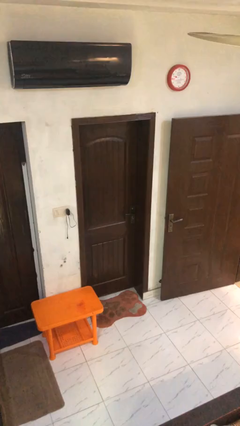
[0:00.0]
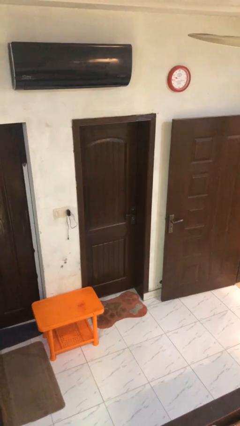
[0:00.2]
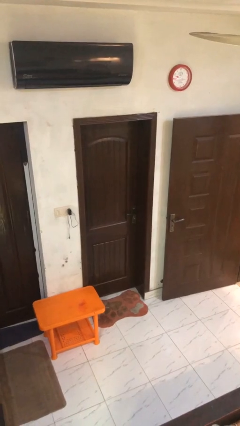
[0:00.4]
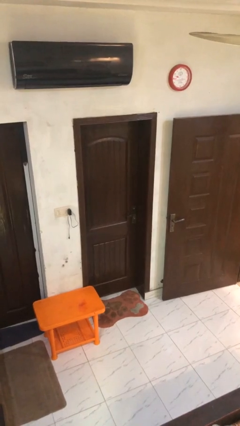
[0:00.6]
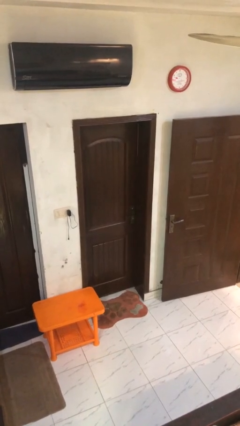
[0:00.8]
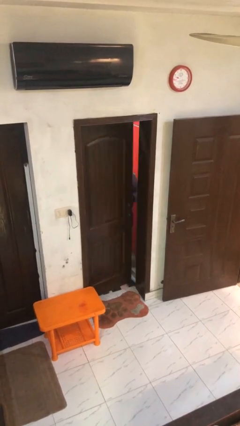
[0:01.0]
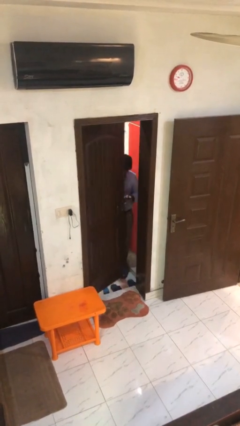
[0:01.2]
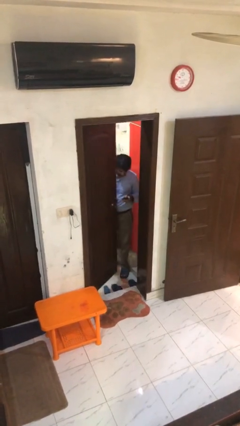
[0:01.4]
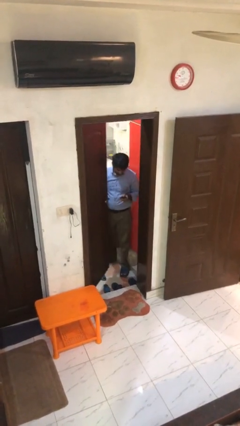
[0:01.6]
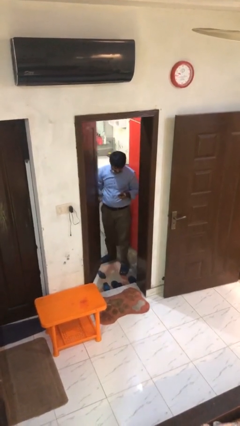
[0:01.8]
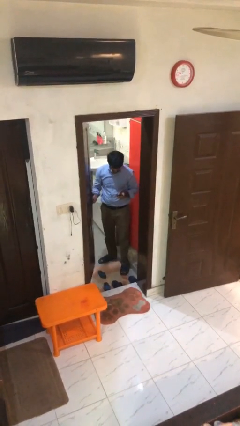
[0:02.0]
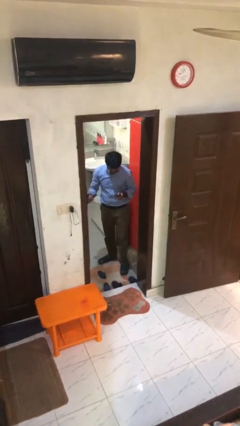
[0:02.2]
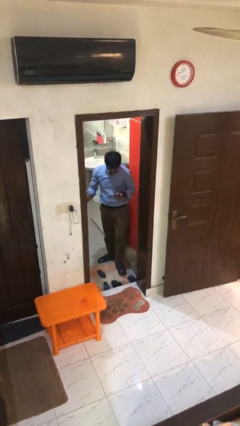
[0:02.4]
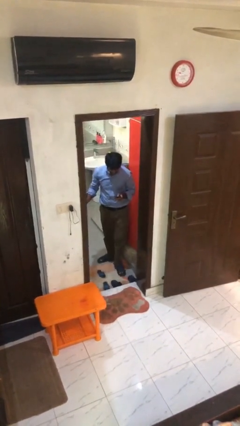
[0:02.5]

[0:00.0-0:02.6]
person opens facility door

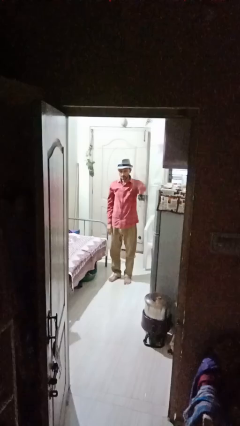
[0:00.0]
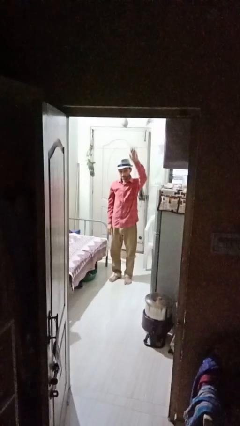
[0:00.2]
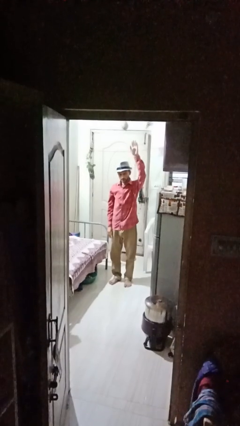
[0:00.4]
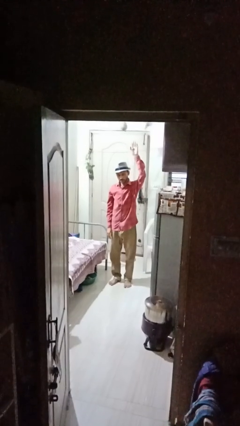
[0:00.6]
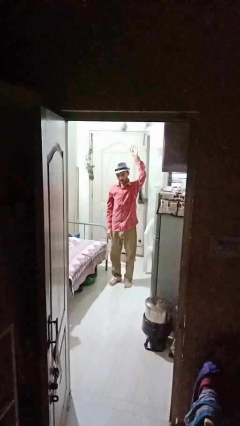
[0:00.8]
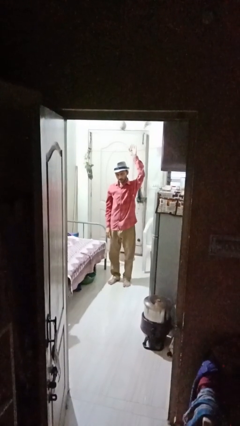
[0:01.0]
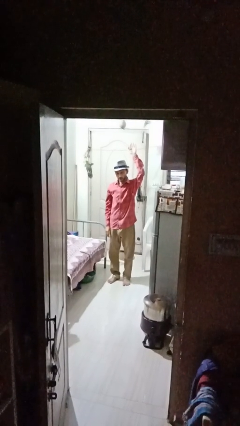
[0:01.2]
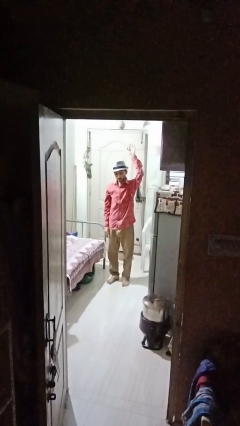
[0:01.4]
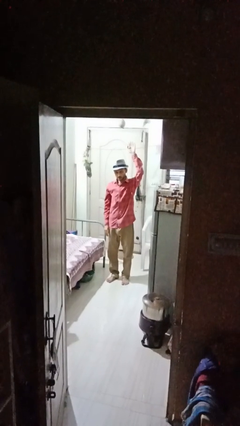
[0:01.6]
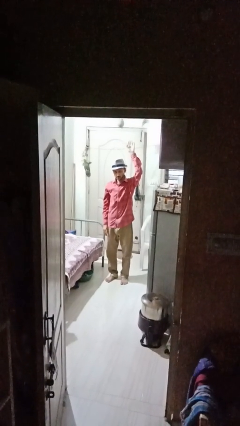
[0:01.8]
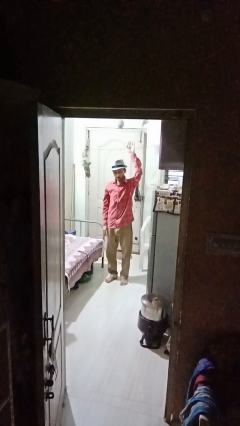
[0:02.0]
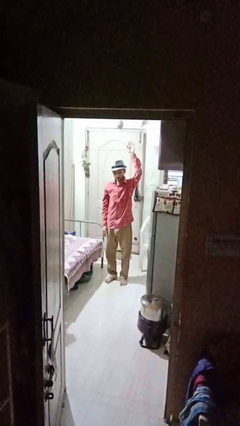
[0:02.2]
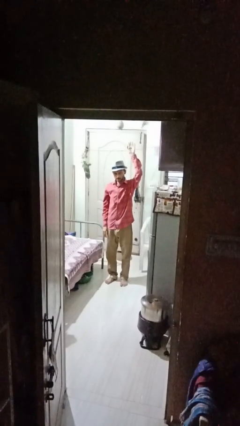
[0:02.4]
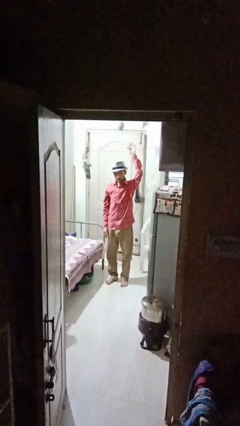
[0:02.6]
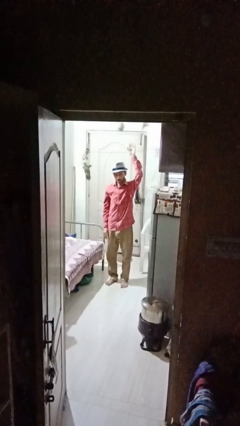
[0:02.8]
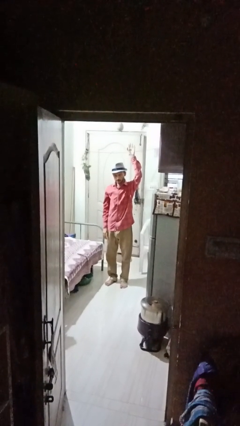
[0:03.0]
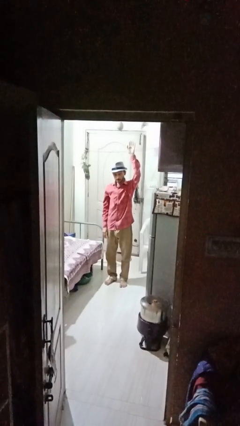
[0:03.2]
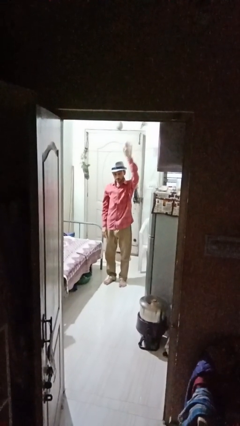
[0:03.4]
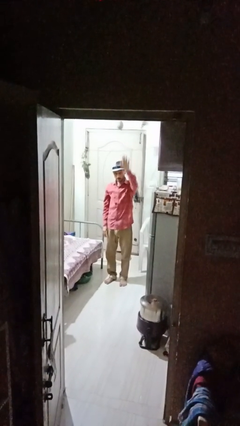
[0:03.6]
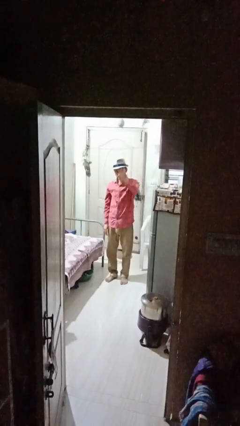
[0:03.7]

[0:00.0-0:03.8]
person gestures raise hand

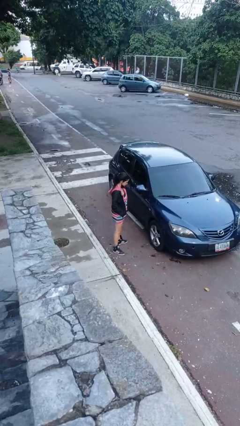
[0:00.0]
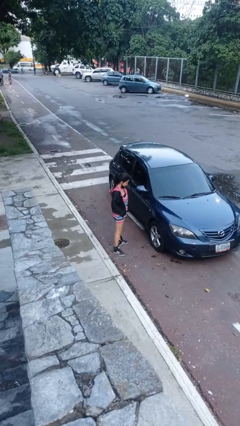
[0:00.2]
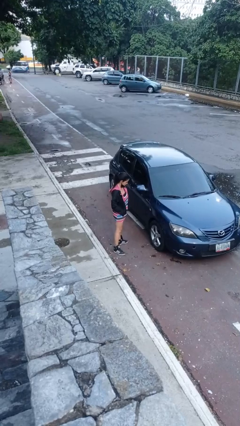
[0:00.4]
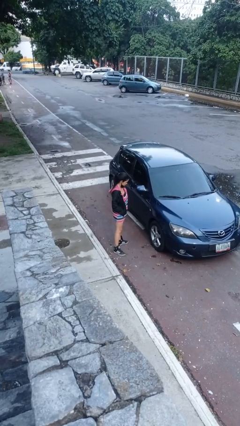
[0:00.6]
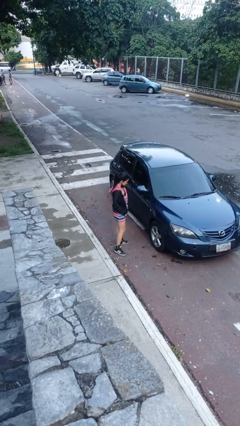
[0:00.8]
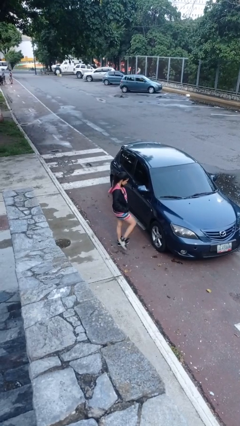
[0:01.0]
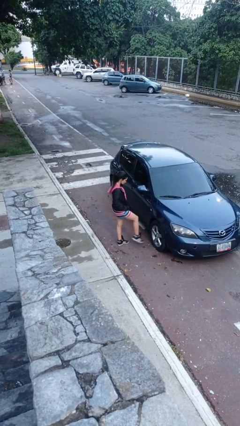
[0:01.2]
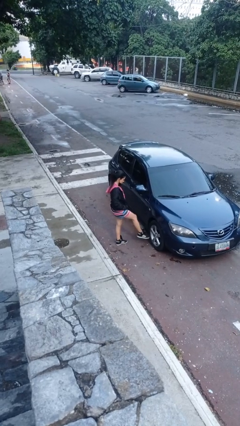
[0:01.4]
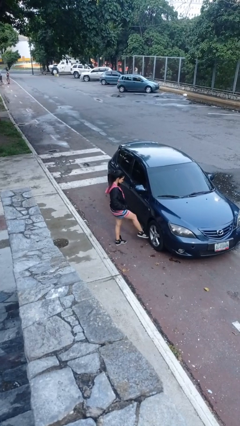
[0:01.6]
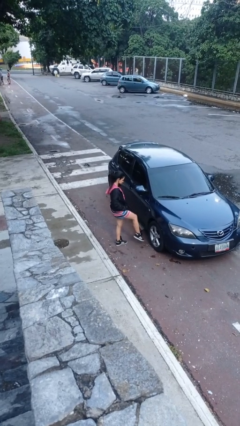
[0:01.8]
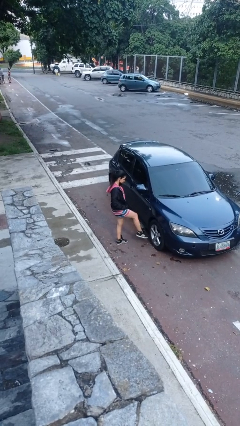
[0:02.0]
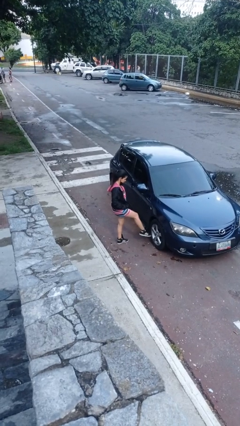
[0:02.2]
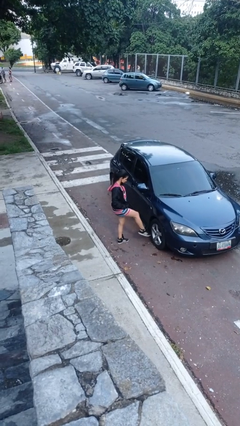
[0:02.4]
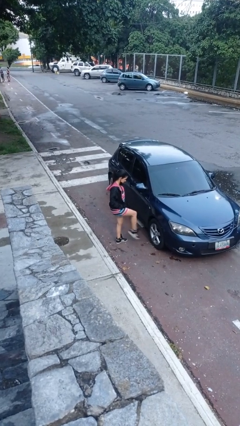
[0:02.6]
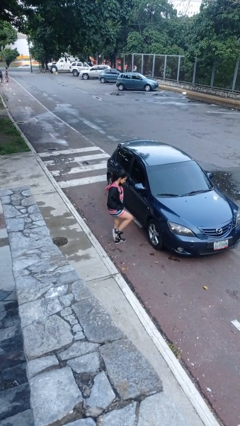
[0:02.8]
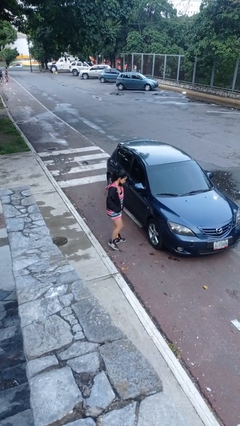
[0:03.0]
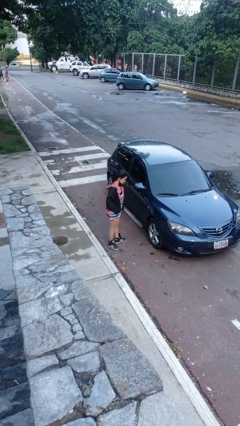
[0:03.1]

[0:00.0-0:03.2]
person kicks car tires

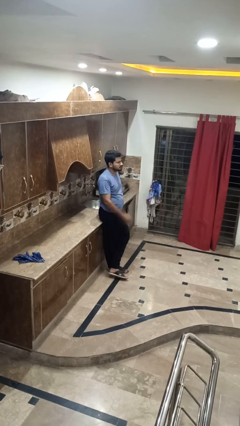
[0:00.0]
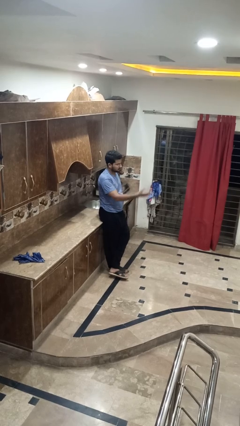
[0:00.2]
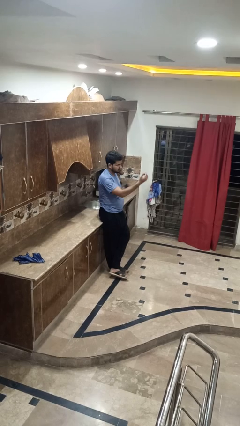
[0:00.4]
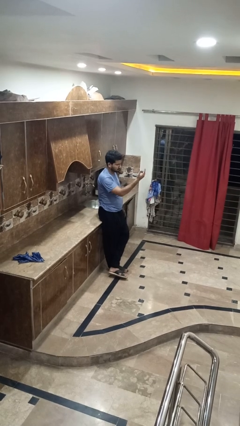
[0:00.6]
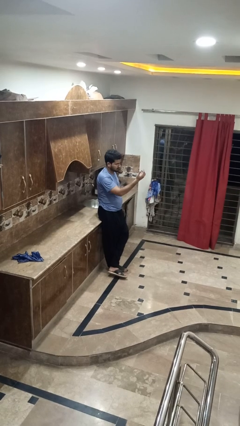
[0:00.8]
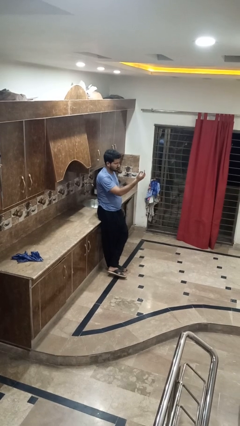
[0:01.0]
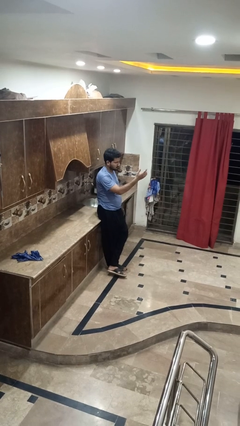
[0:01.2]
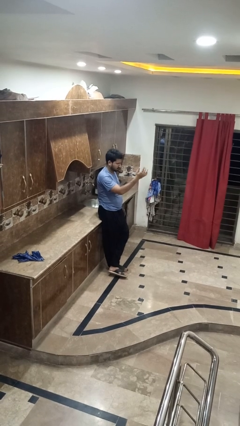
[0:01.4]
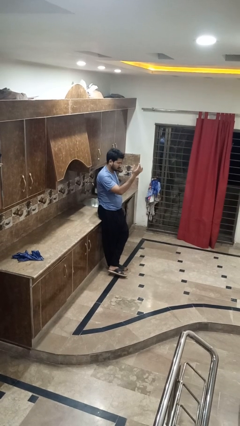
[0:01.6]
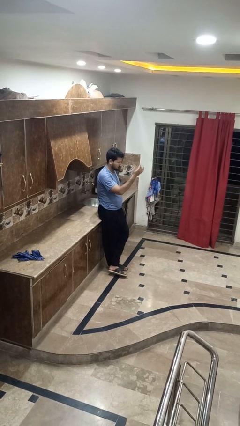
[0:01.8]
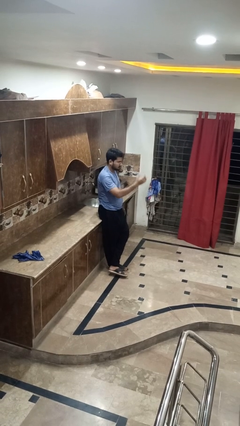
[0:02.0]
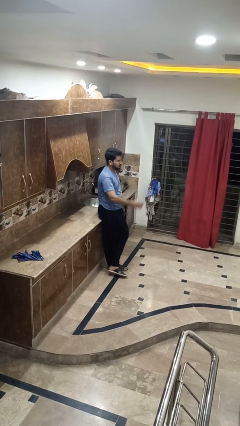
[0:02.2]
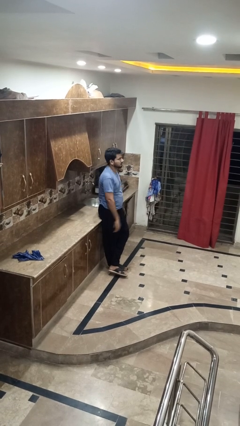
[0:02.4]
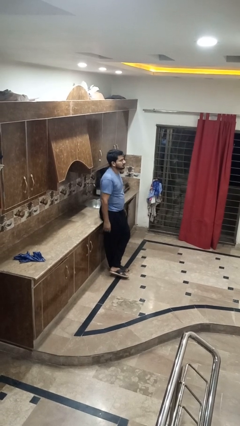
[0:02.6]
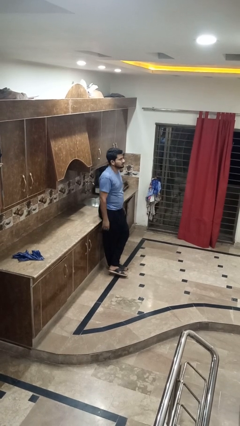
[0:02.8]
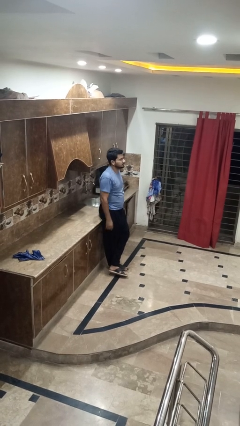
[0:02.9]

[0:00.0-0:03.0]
person gestures come here

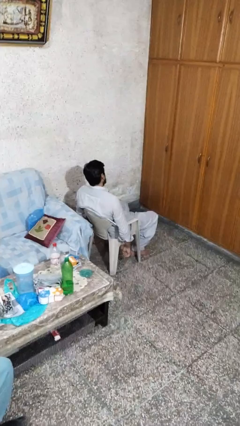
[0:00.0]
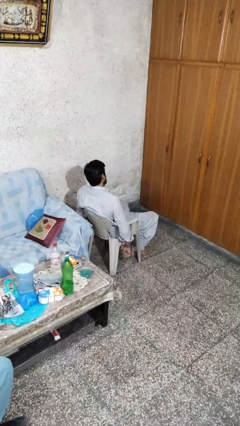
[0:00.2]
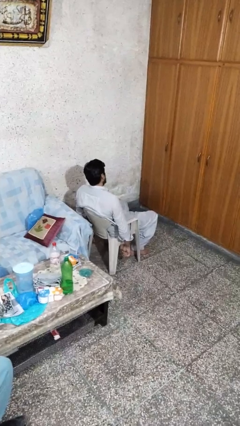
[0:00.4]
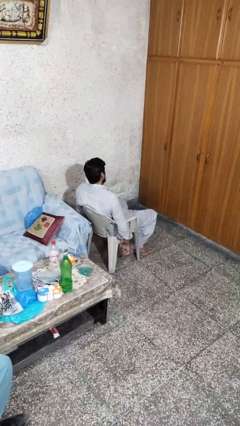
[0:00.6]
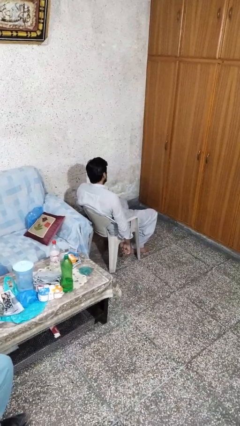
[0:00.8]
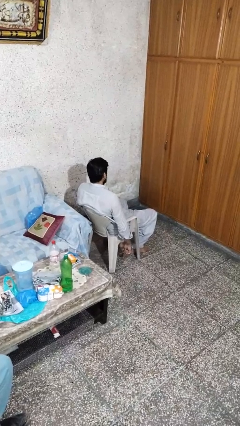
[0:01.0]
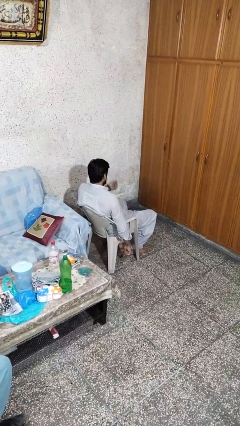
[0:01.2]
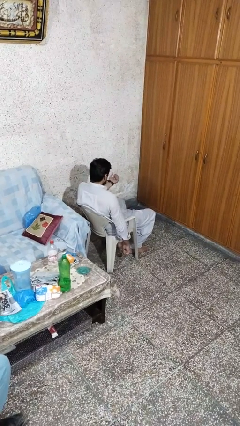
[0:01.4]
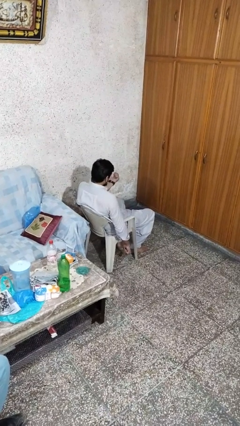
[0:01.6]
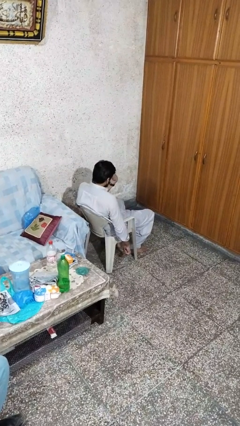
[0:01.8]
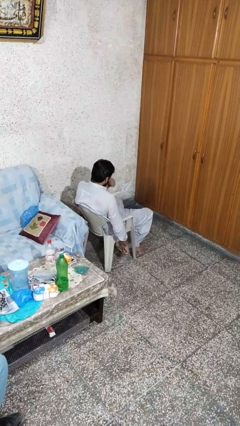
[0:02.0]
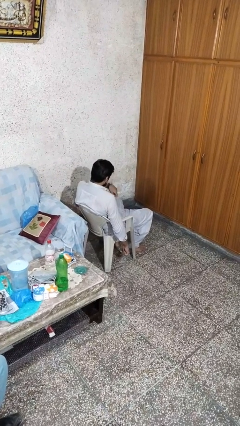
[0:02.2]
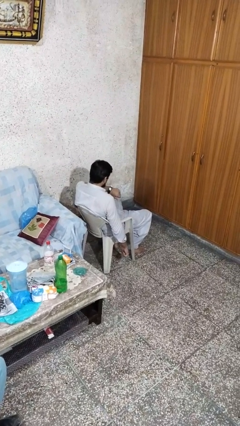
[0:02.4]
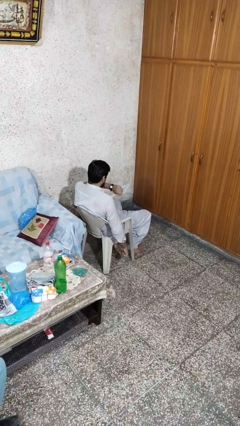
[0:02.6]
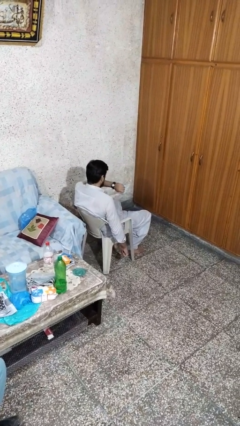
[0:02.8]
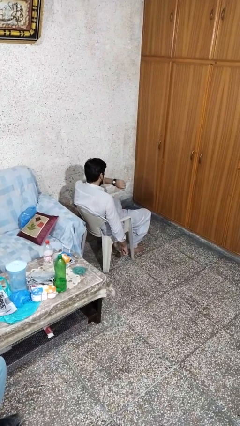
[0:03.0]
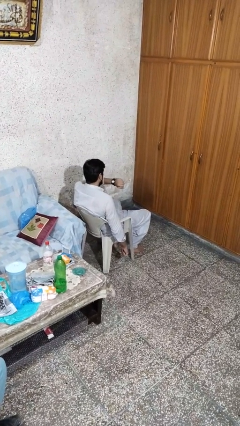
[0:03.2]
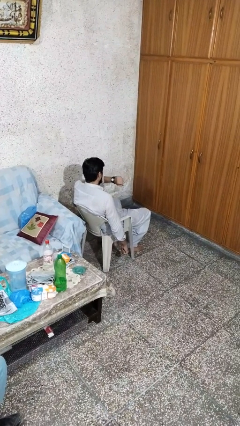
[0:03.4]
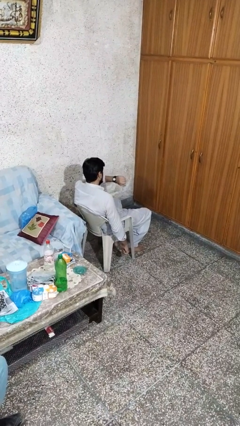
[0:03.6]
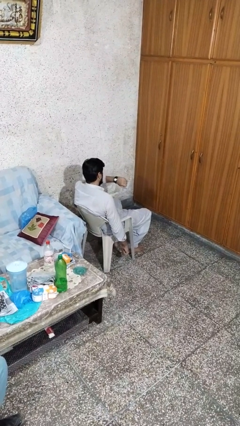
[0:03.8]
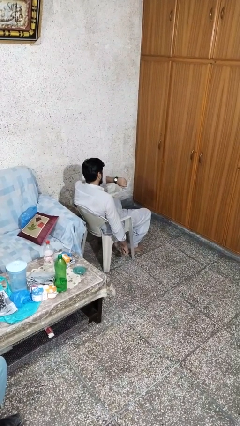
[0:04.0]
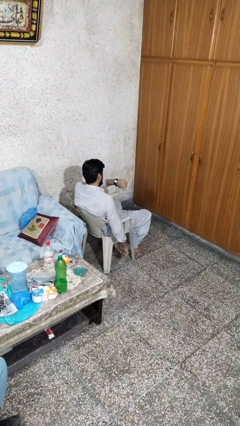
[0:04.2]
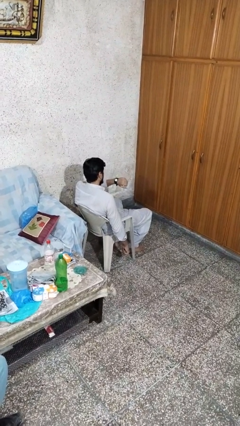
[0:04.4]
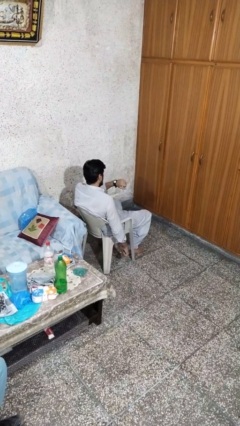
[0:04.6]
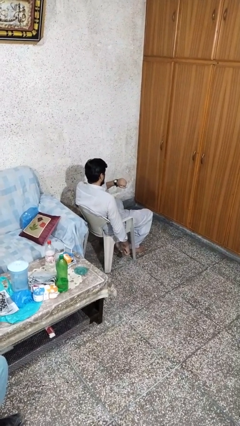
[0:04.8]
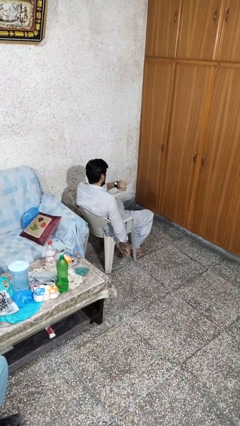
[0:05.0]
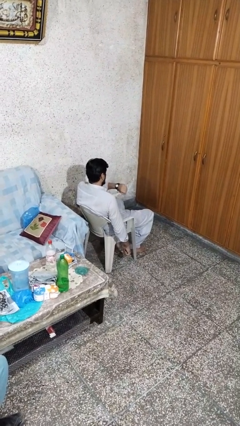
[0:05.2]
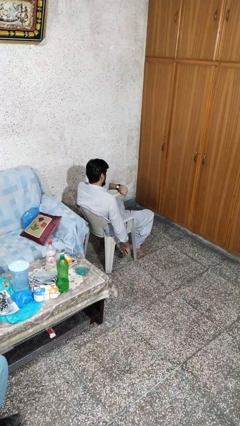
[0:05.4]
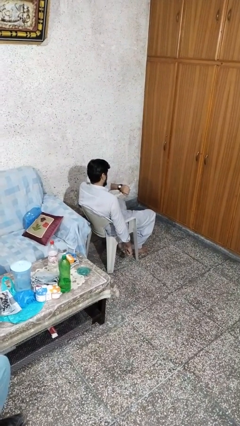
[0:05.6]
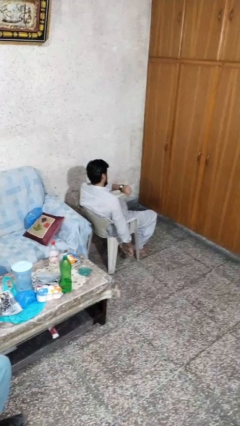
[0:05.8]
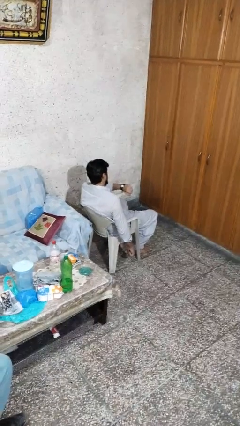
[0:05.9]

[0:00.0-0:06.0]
person looks at wristwatch
